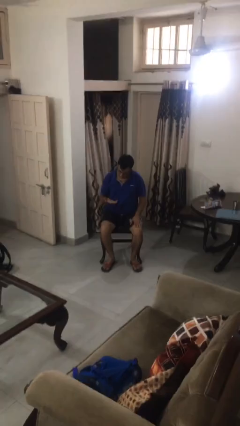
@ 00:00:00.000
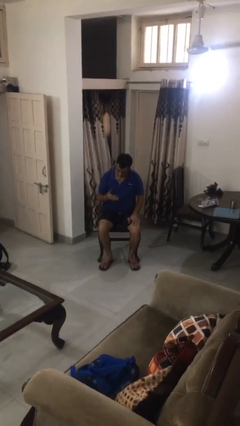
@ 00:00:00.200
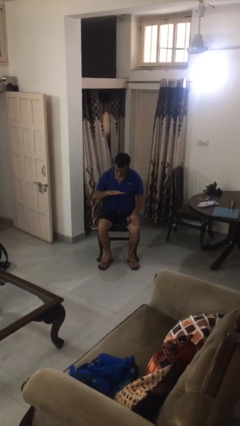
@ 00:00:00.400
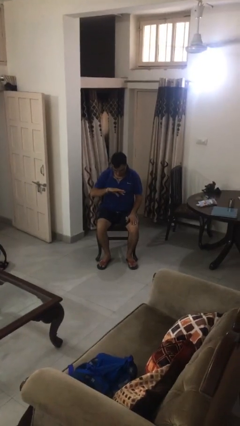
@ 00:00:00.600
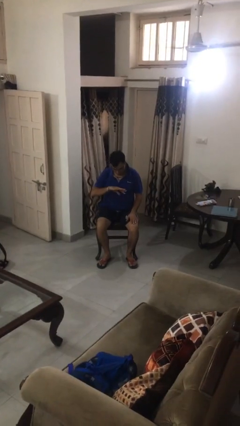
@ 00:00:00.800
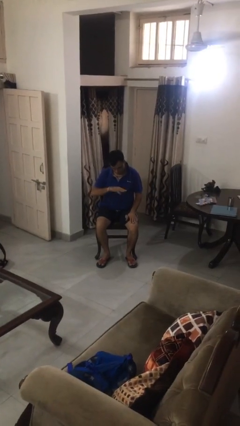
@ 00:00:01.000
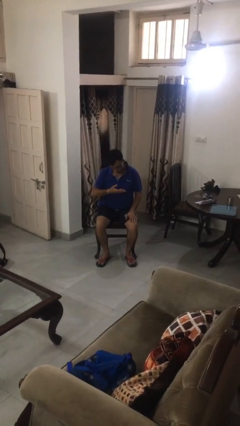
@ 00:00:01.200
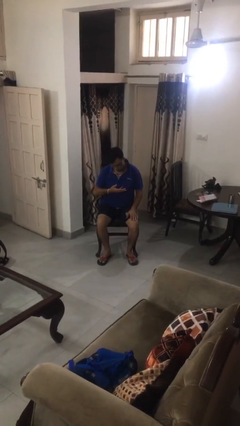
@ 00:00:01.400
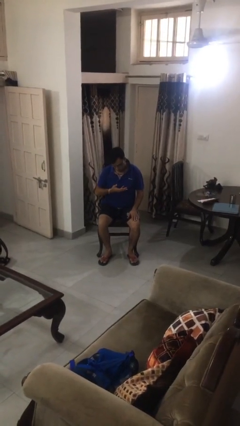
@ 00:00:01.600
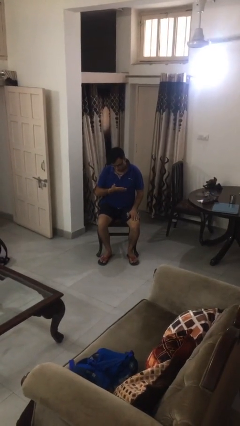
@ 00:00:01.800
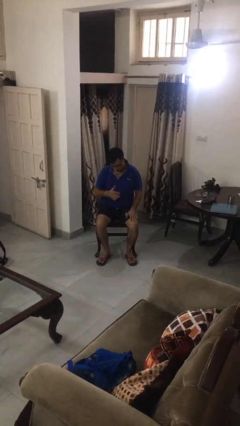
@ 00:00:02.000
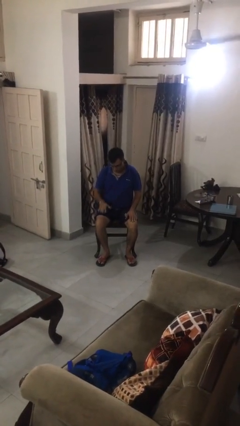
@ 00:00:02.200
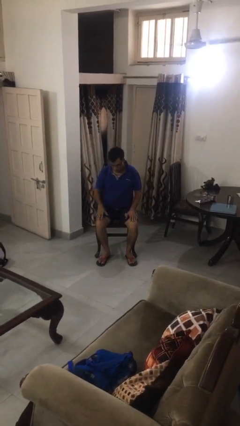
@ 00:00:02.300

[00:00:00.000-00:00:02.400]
person looks at hands in lap

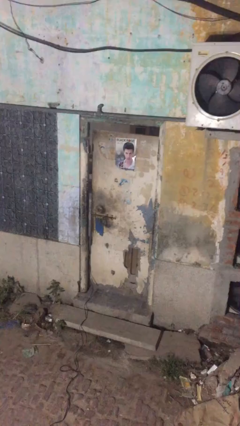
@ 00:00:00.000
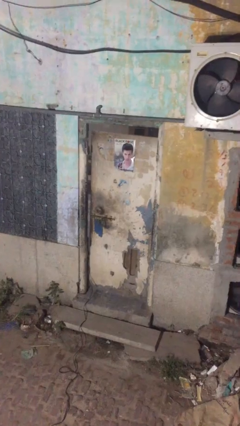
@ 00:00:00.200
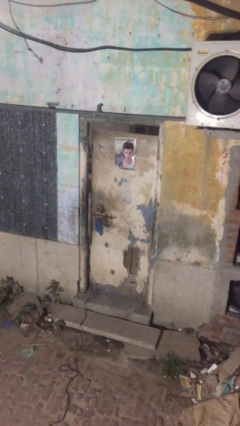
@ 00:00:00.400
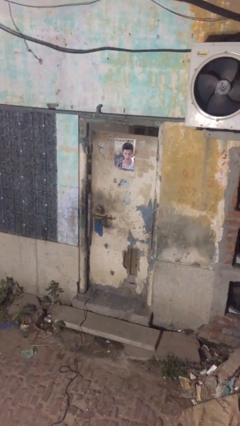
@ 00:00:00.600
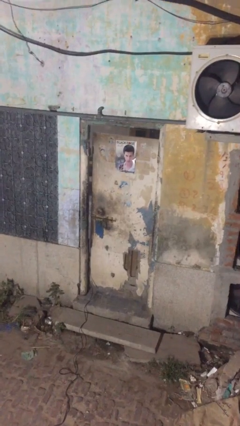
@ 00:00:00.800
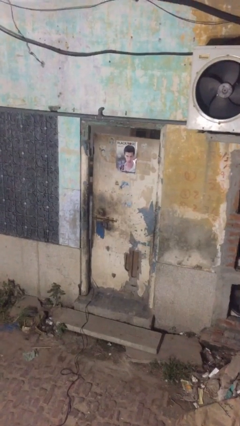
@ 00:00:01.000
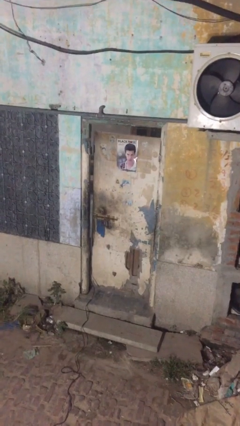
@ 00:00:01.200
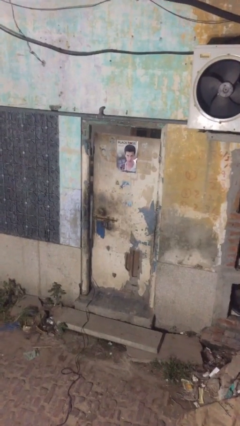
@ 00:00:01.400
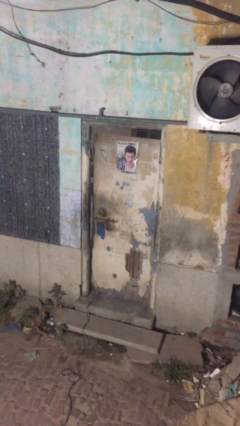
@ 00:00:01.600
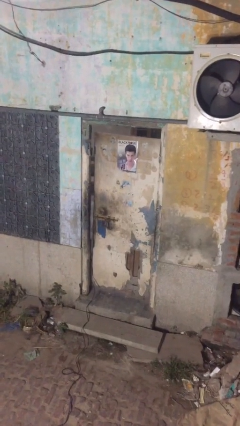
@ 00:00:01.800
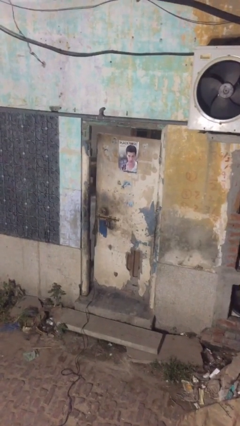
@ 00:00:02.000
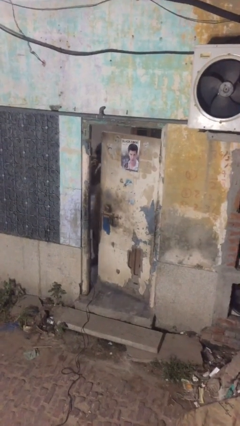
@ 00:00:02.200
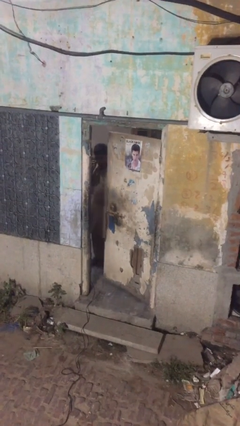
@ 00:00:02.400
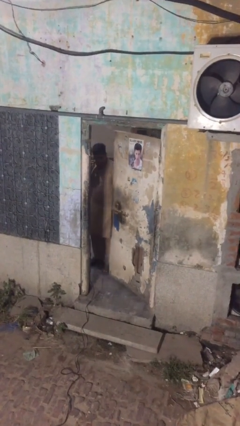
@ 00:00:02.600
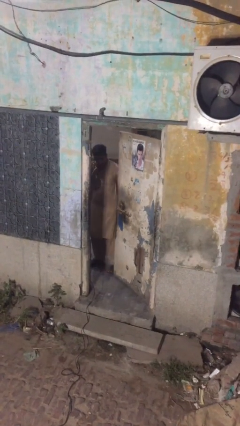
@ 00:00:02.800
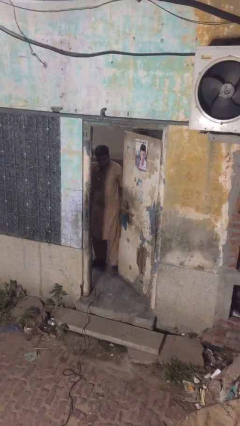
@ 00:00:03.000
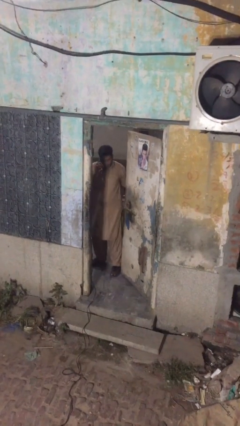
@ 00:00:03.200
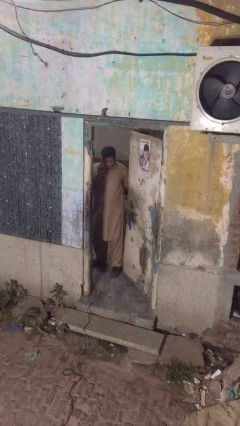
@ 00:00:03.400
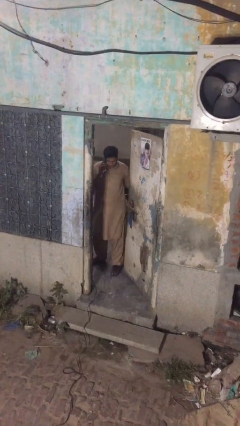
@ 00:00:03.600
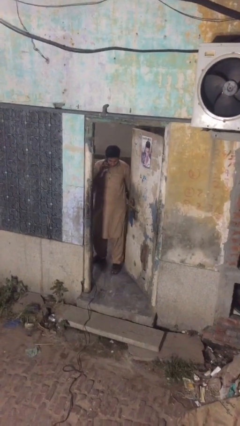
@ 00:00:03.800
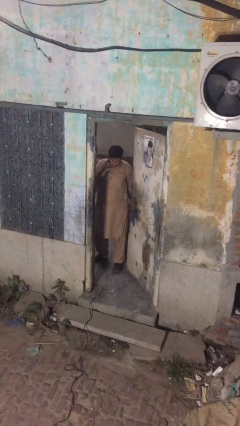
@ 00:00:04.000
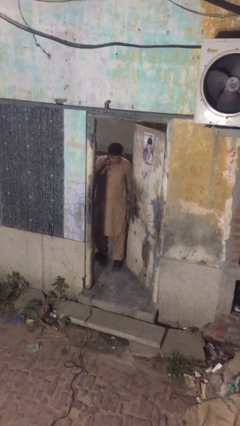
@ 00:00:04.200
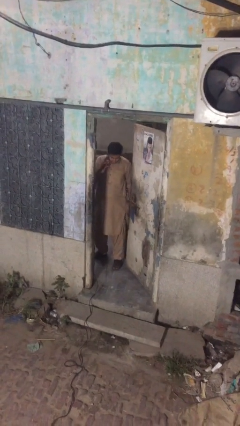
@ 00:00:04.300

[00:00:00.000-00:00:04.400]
person opens facility door

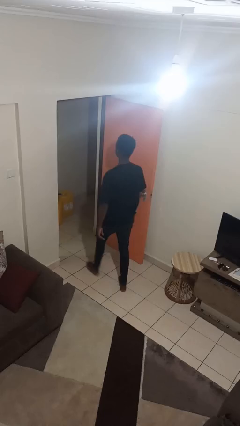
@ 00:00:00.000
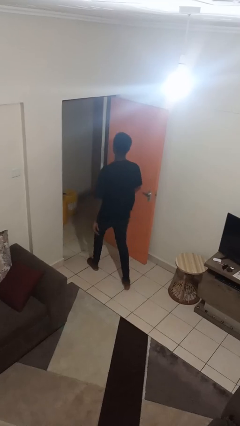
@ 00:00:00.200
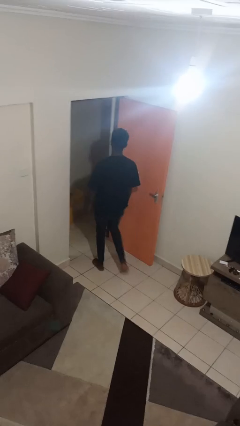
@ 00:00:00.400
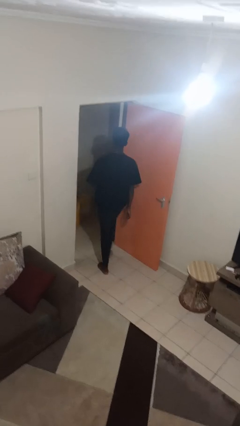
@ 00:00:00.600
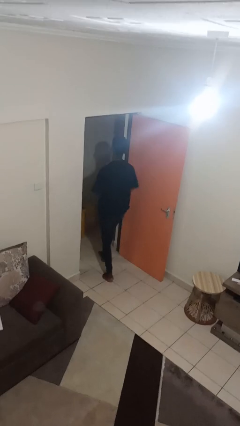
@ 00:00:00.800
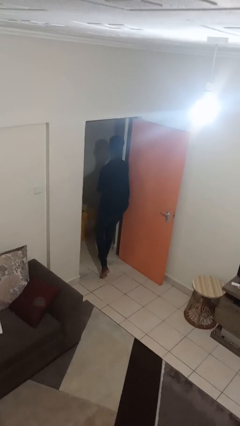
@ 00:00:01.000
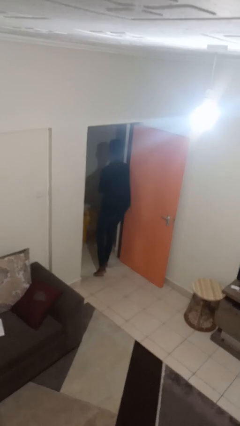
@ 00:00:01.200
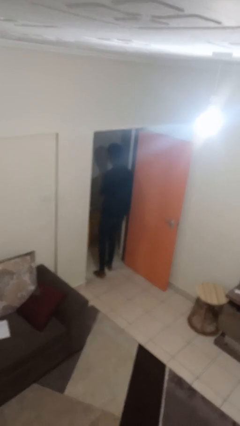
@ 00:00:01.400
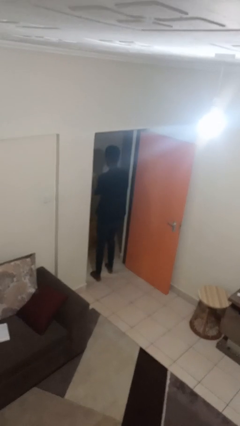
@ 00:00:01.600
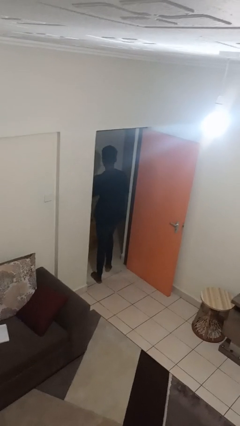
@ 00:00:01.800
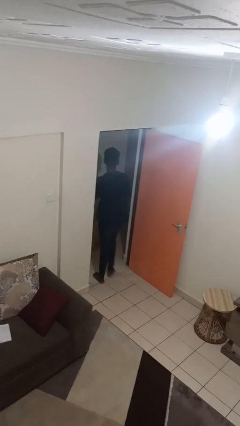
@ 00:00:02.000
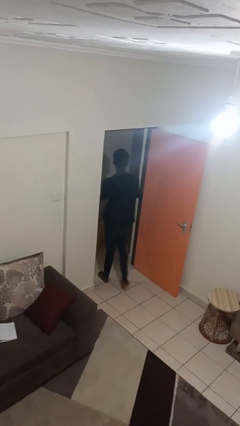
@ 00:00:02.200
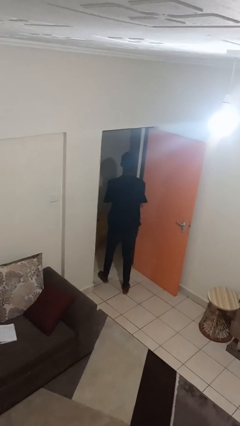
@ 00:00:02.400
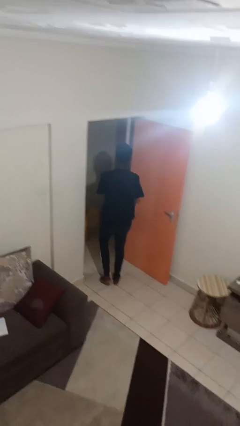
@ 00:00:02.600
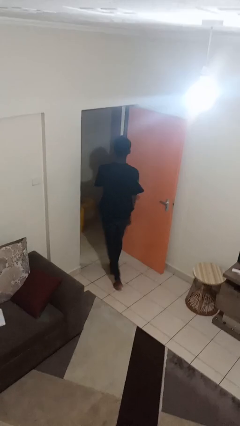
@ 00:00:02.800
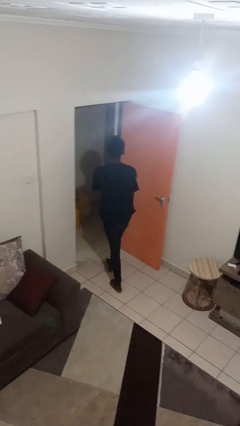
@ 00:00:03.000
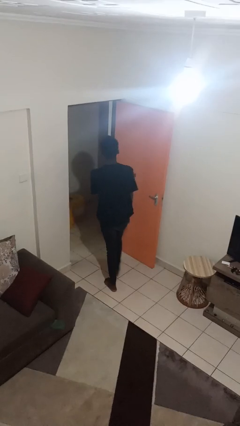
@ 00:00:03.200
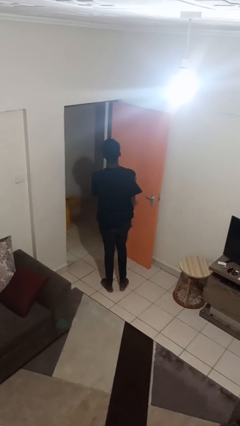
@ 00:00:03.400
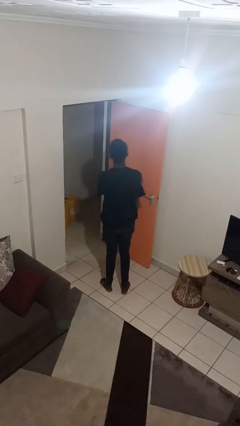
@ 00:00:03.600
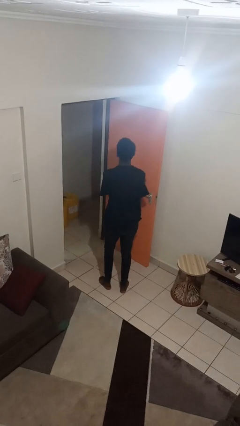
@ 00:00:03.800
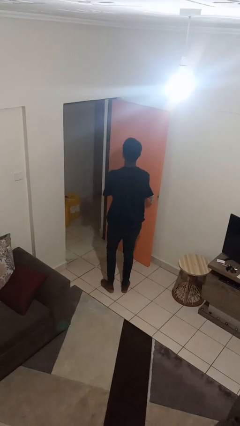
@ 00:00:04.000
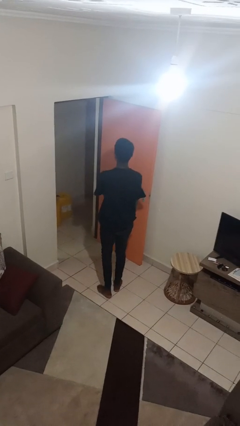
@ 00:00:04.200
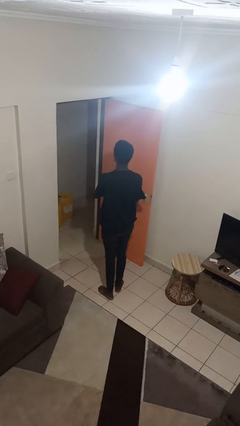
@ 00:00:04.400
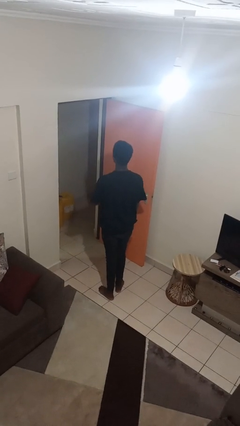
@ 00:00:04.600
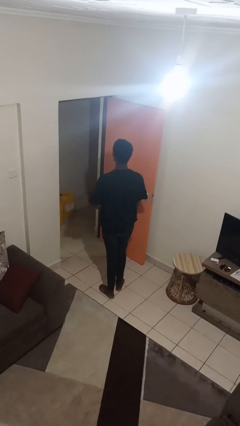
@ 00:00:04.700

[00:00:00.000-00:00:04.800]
person bumps into wall

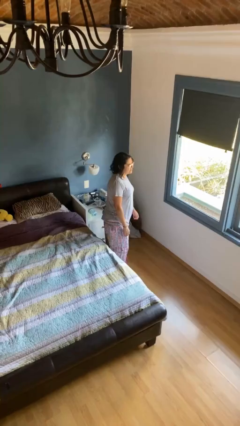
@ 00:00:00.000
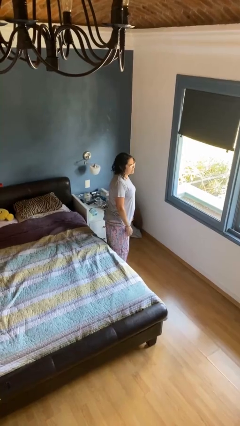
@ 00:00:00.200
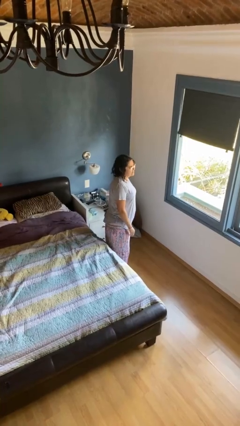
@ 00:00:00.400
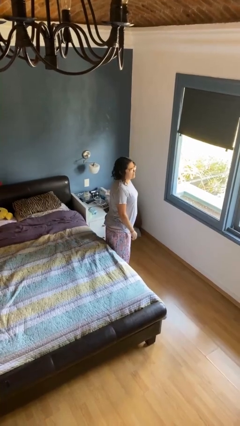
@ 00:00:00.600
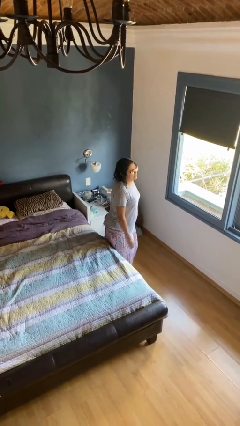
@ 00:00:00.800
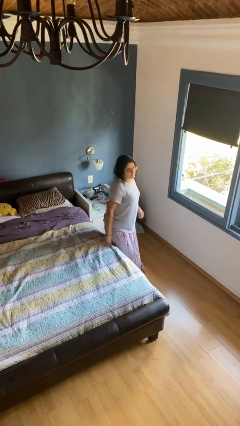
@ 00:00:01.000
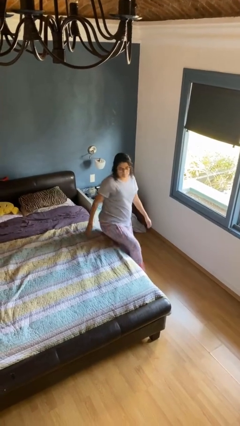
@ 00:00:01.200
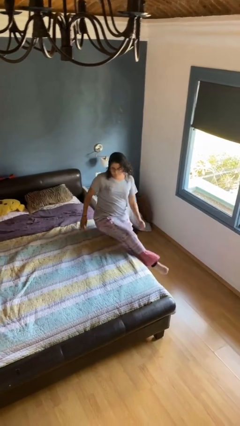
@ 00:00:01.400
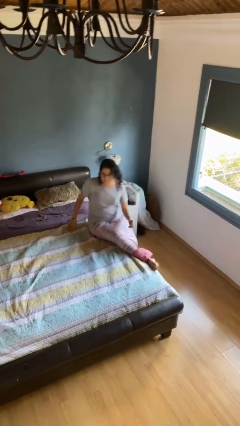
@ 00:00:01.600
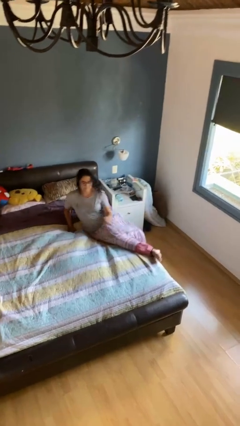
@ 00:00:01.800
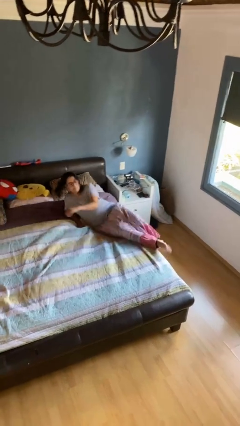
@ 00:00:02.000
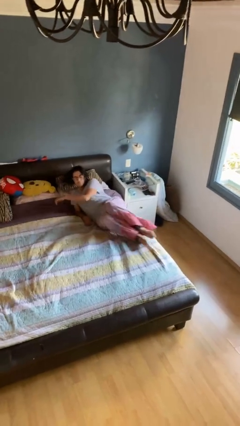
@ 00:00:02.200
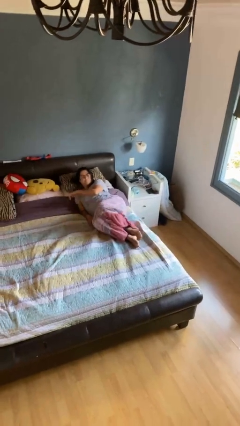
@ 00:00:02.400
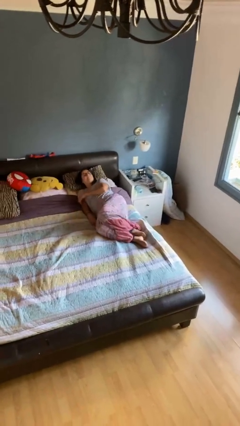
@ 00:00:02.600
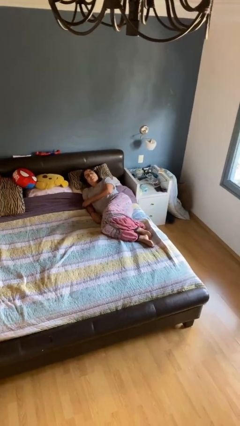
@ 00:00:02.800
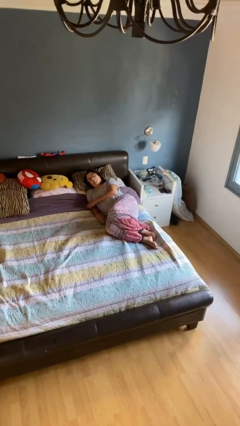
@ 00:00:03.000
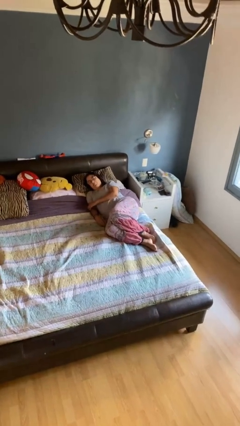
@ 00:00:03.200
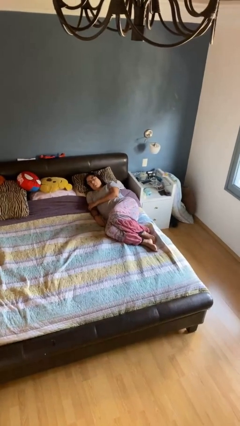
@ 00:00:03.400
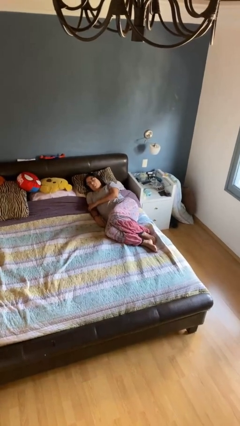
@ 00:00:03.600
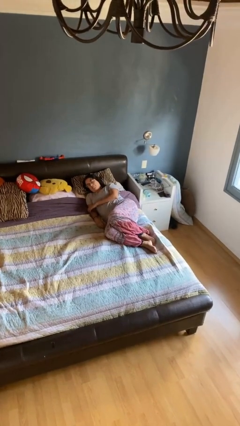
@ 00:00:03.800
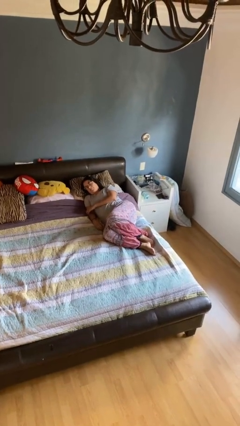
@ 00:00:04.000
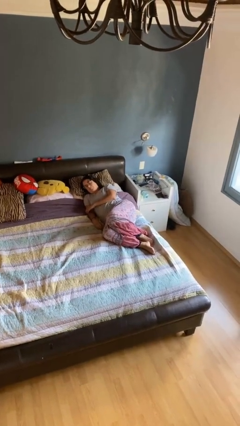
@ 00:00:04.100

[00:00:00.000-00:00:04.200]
person lies down on bed

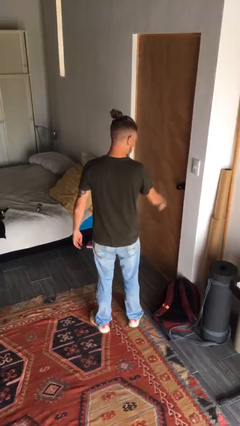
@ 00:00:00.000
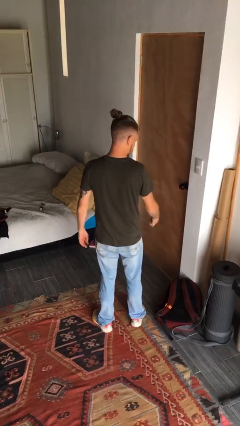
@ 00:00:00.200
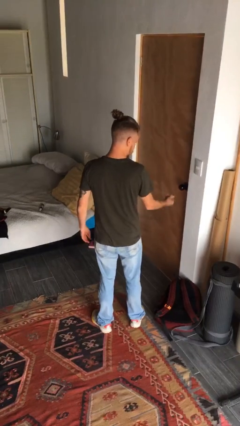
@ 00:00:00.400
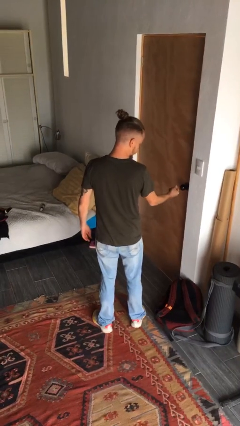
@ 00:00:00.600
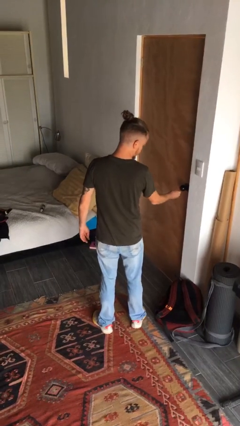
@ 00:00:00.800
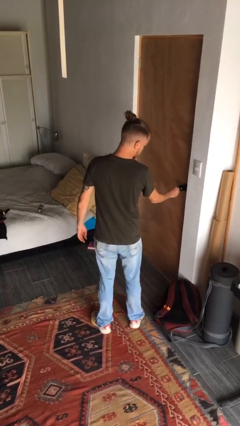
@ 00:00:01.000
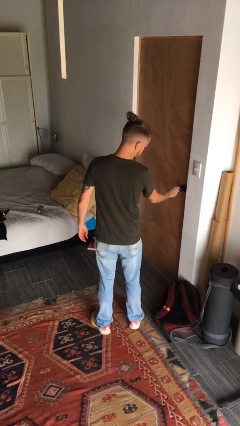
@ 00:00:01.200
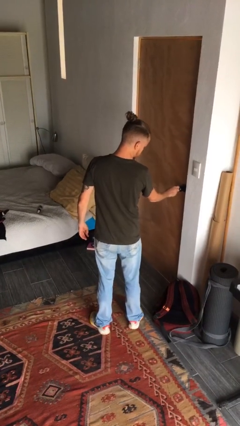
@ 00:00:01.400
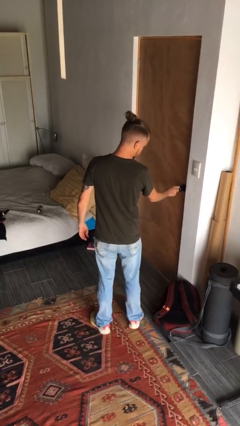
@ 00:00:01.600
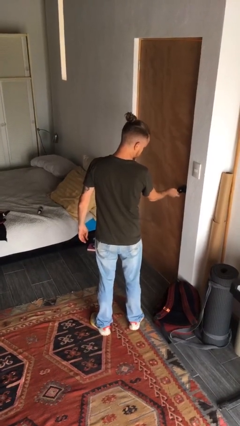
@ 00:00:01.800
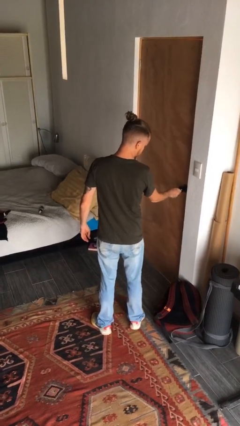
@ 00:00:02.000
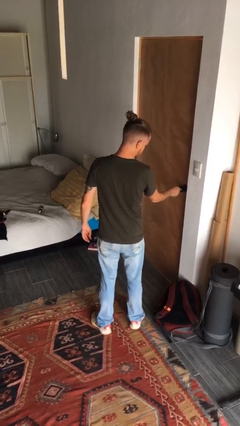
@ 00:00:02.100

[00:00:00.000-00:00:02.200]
person locks door with keys
